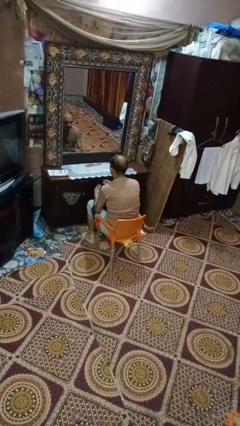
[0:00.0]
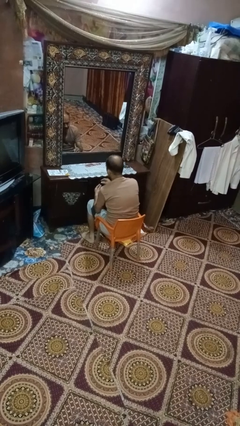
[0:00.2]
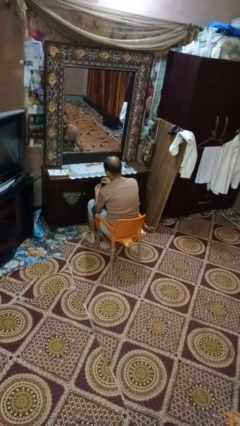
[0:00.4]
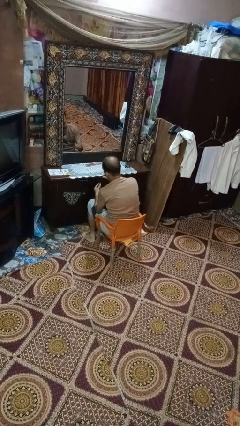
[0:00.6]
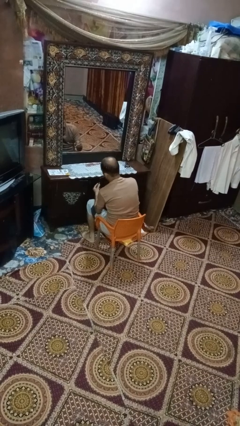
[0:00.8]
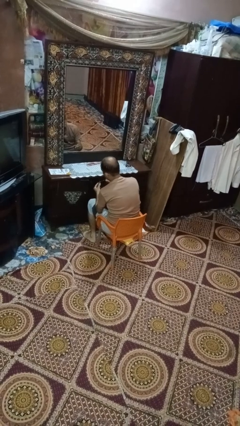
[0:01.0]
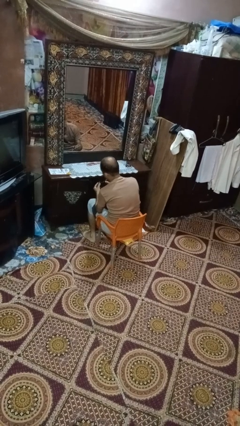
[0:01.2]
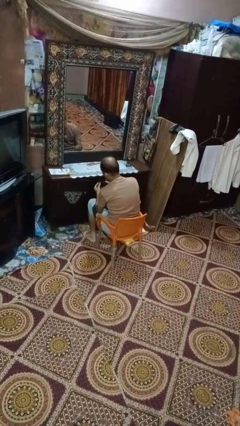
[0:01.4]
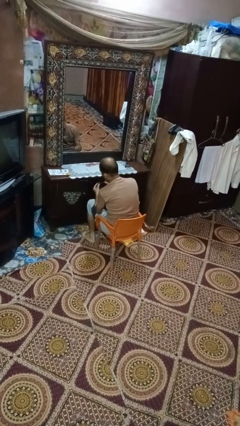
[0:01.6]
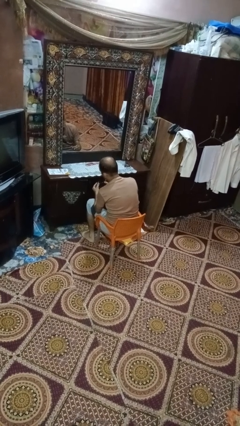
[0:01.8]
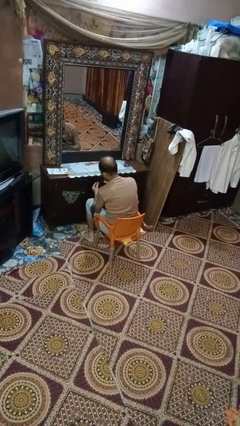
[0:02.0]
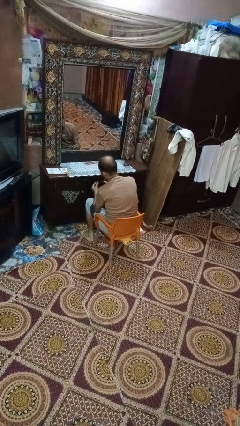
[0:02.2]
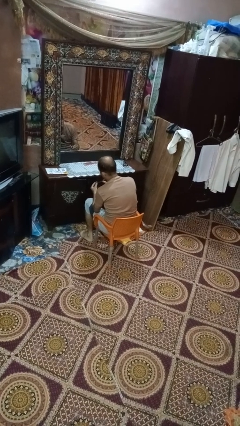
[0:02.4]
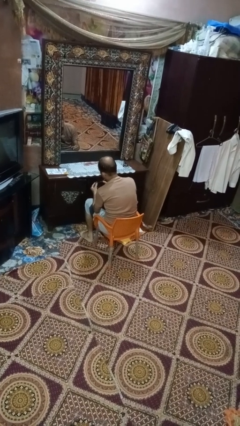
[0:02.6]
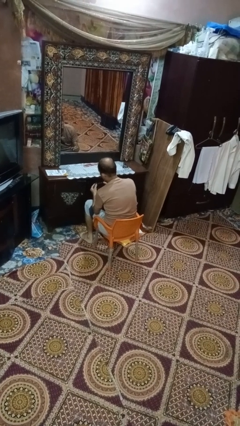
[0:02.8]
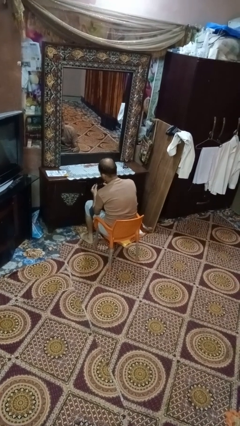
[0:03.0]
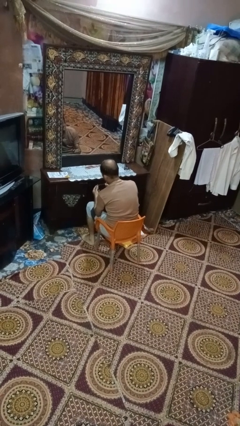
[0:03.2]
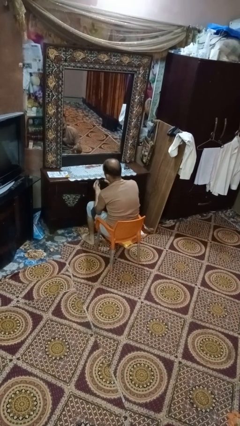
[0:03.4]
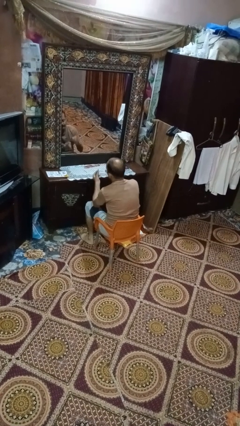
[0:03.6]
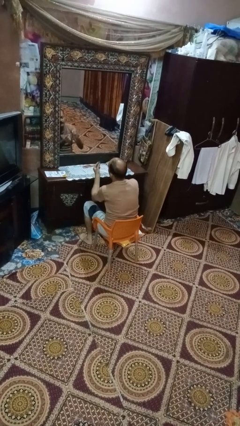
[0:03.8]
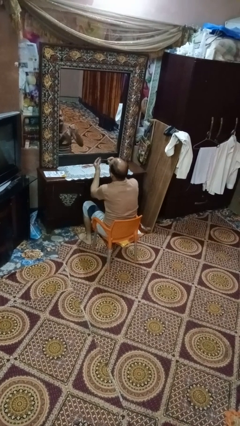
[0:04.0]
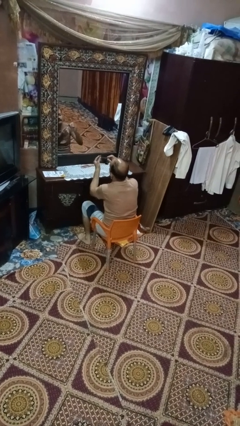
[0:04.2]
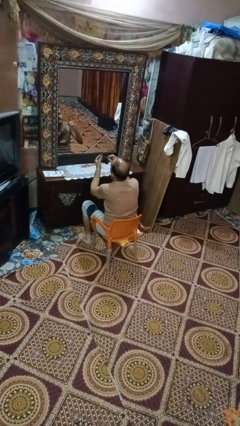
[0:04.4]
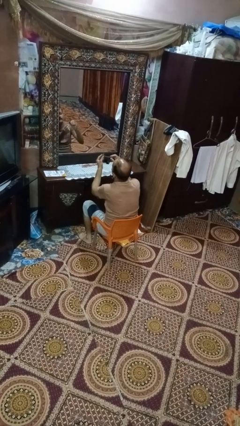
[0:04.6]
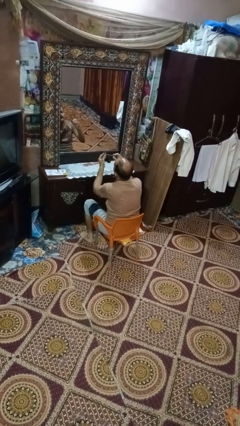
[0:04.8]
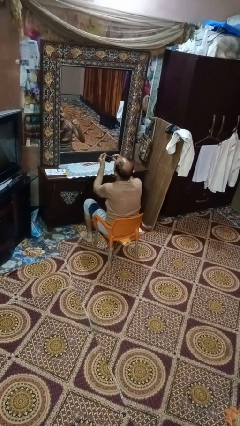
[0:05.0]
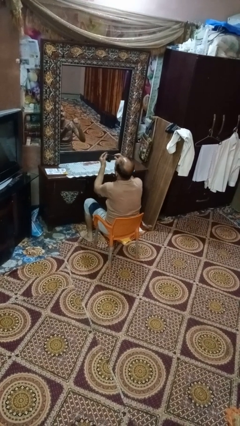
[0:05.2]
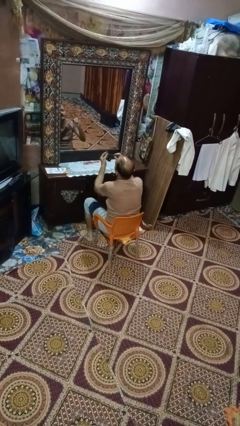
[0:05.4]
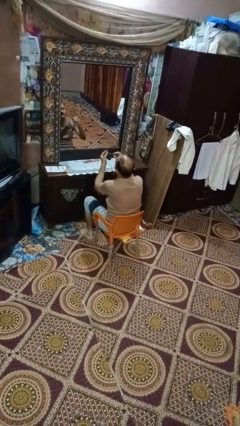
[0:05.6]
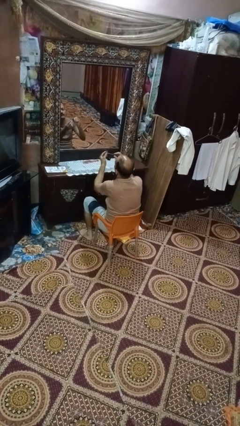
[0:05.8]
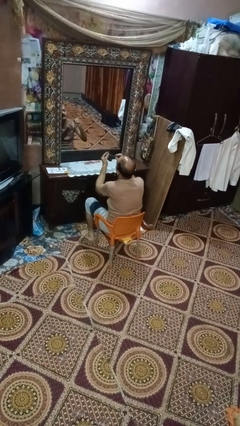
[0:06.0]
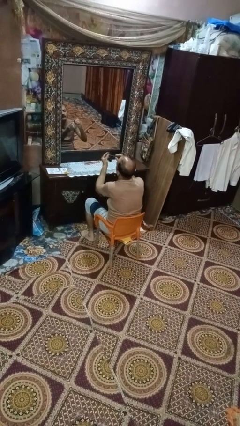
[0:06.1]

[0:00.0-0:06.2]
person paints fingernails

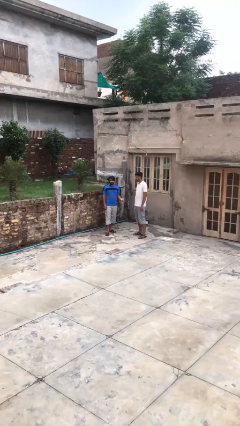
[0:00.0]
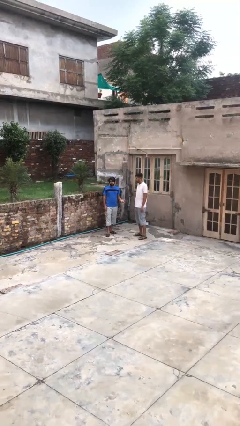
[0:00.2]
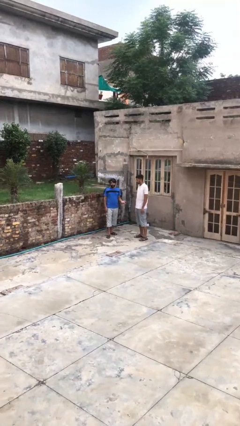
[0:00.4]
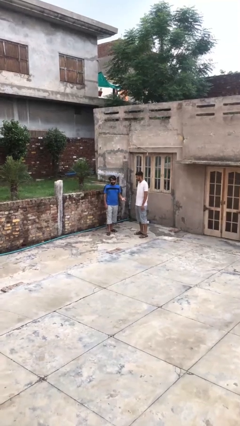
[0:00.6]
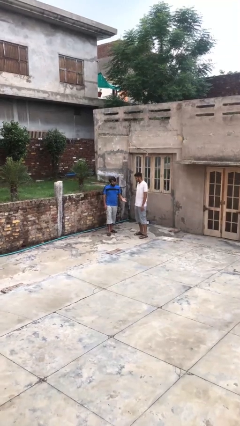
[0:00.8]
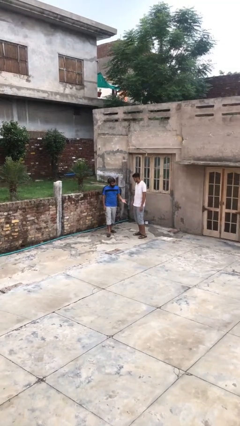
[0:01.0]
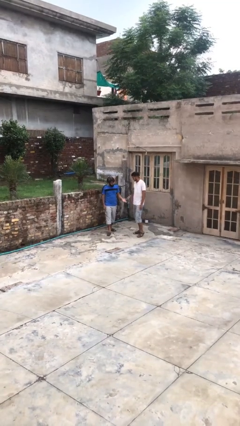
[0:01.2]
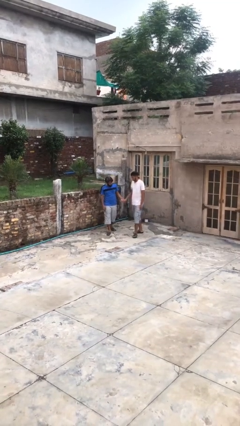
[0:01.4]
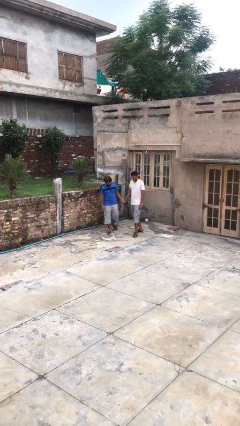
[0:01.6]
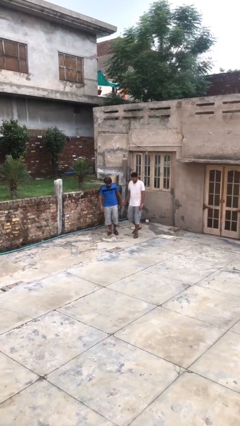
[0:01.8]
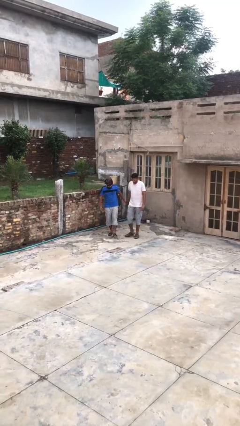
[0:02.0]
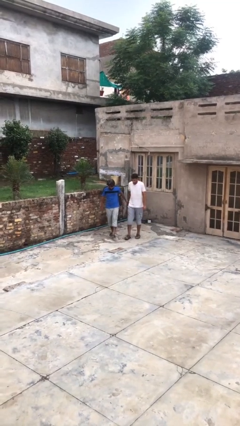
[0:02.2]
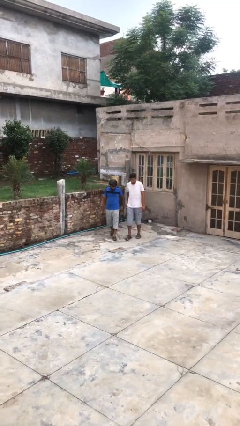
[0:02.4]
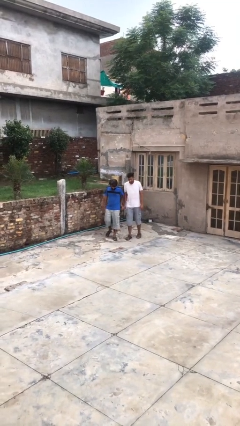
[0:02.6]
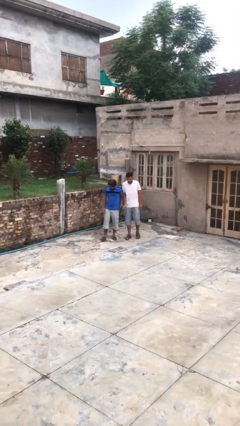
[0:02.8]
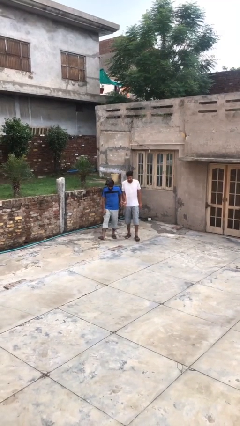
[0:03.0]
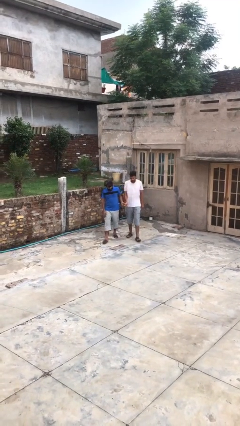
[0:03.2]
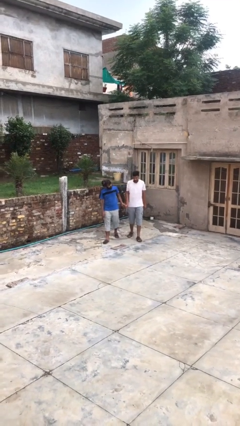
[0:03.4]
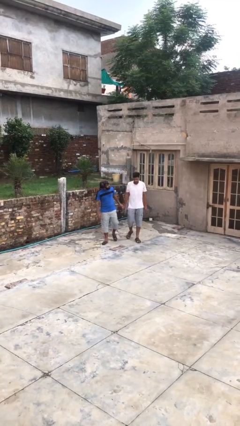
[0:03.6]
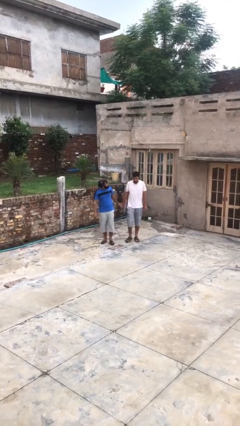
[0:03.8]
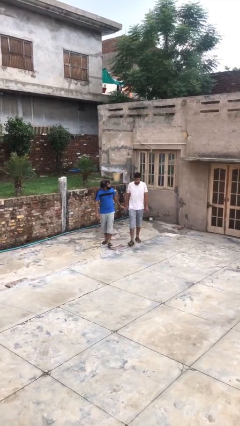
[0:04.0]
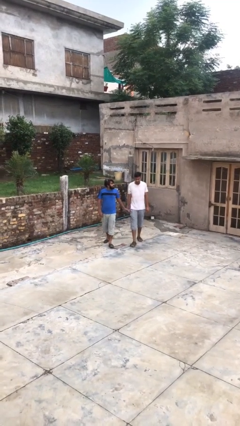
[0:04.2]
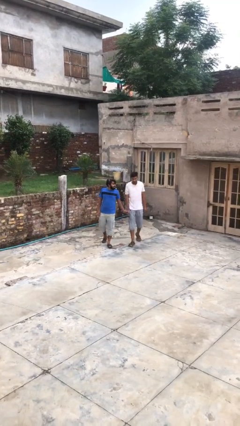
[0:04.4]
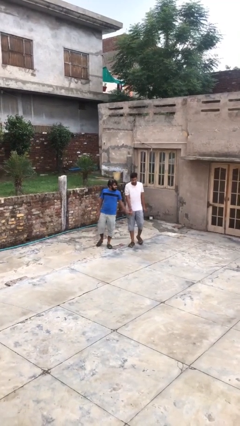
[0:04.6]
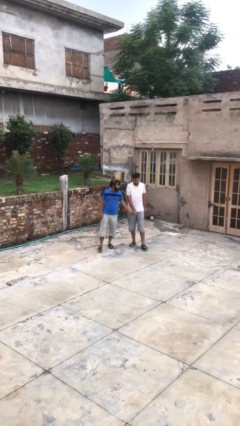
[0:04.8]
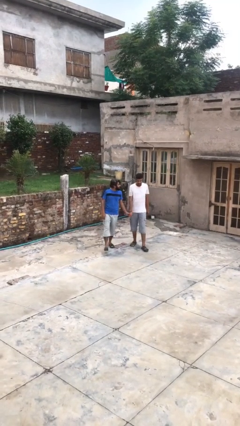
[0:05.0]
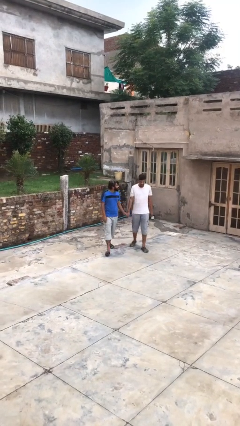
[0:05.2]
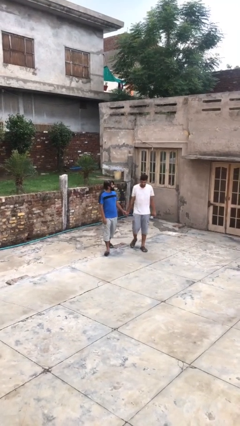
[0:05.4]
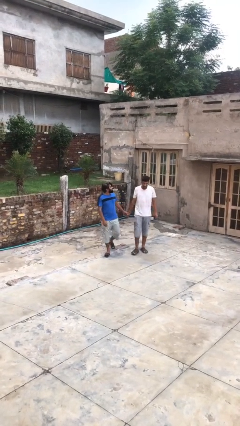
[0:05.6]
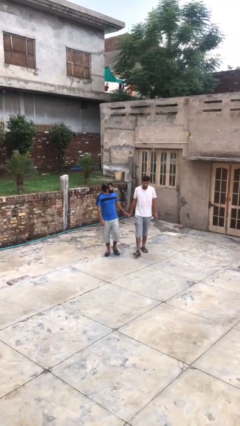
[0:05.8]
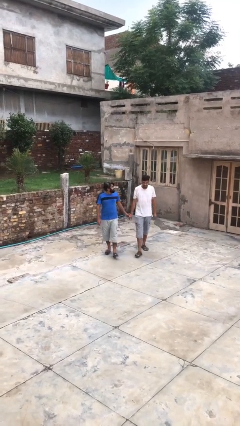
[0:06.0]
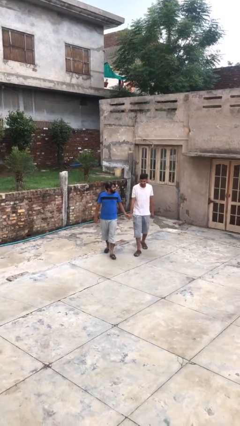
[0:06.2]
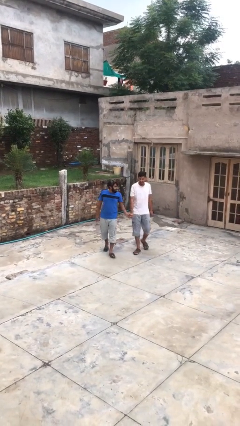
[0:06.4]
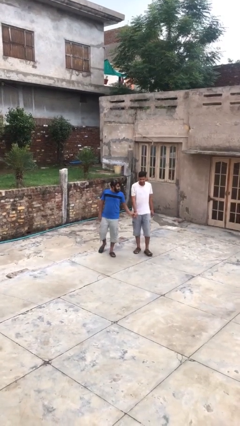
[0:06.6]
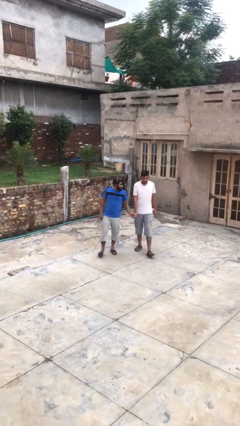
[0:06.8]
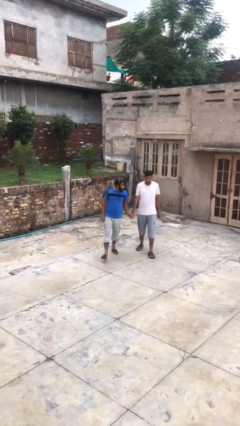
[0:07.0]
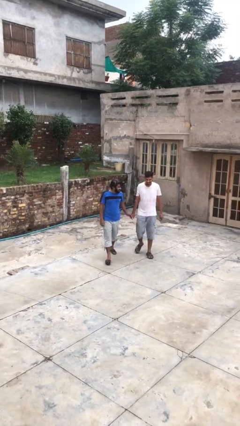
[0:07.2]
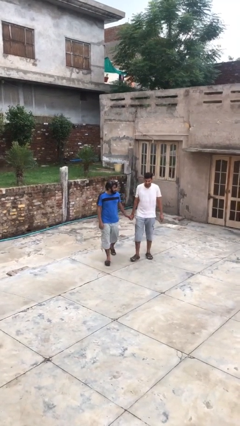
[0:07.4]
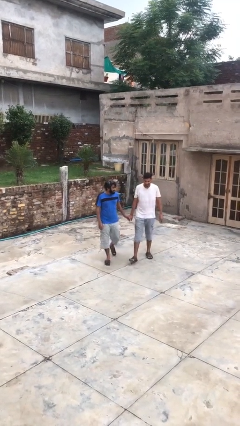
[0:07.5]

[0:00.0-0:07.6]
person holds hand

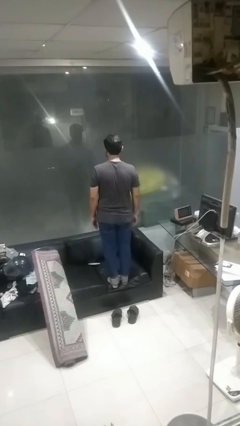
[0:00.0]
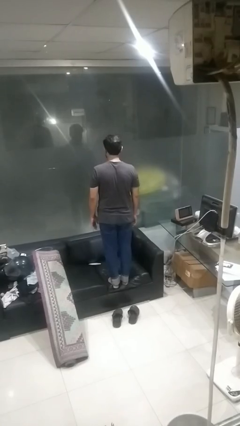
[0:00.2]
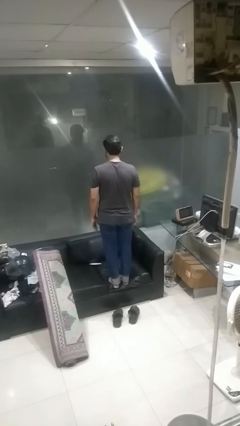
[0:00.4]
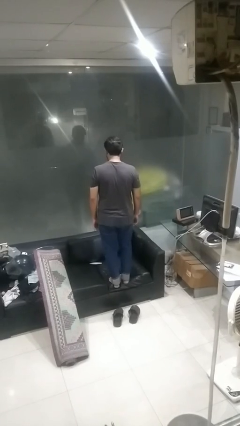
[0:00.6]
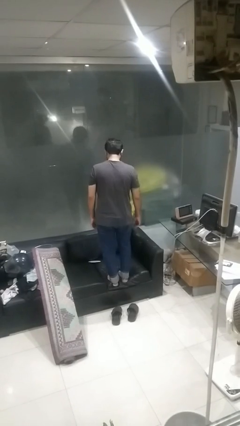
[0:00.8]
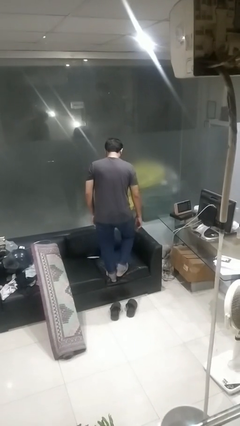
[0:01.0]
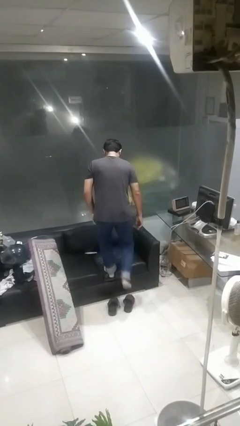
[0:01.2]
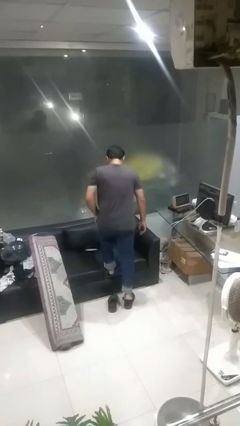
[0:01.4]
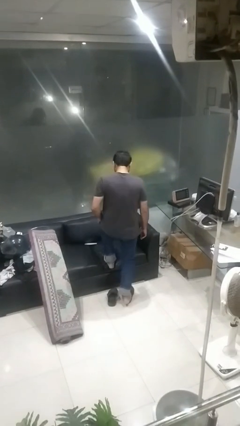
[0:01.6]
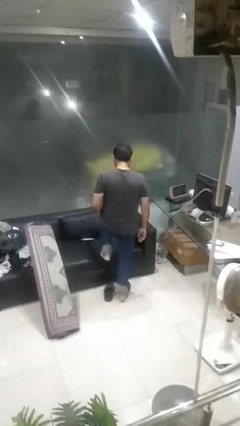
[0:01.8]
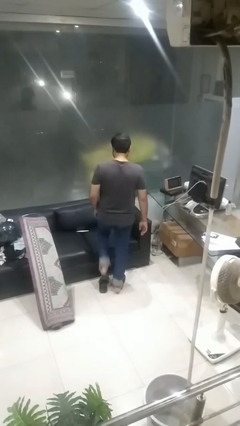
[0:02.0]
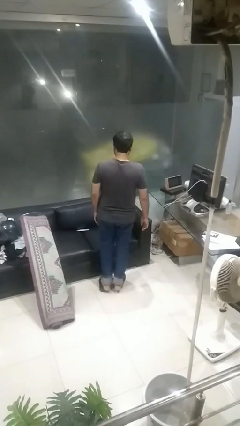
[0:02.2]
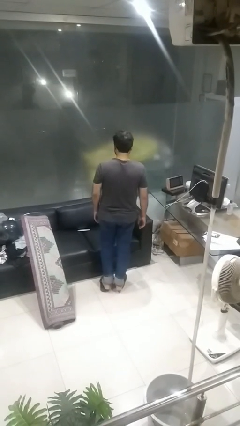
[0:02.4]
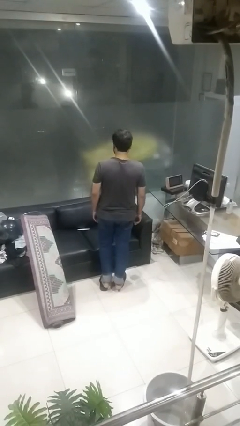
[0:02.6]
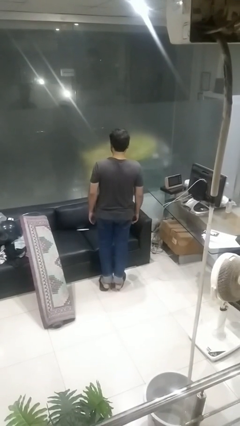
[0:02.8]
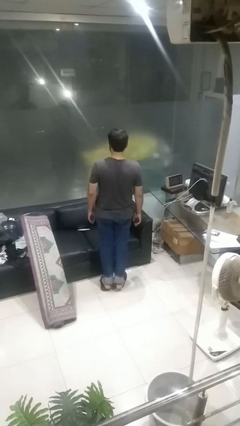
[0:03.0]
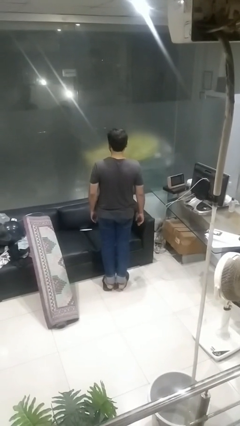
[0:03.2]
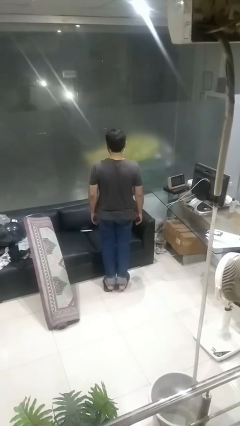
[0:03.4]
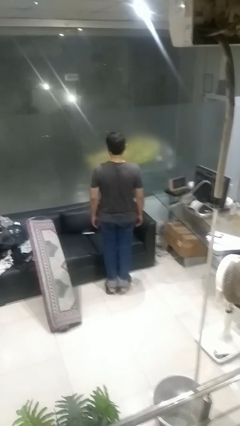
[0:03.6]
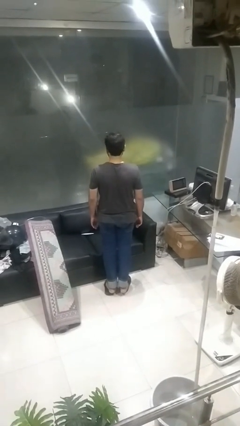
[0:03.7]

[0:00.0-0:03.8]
person climbs off couch
